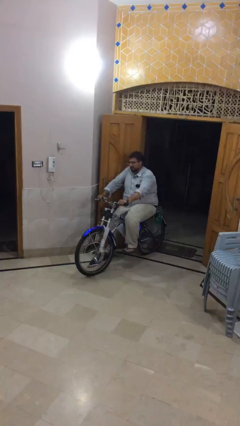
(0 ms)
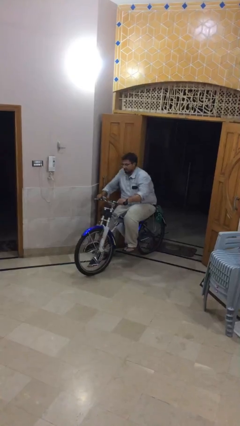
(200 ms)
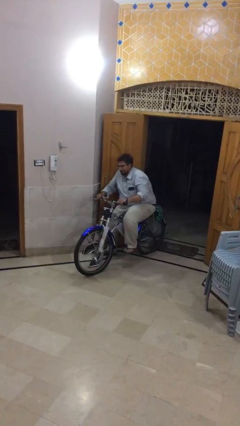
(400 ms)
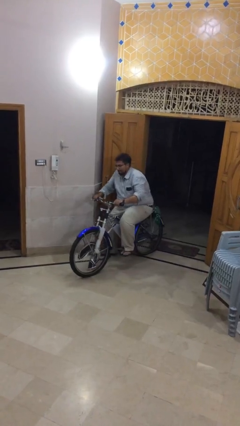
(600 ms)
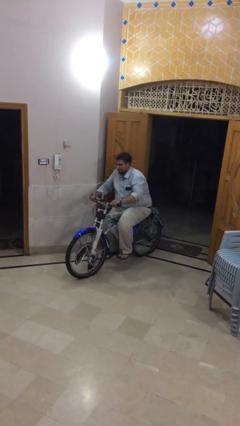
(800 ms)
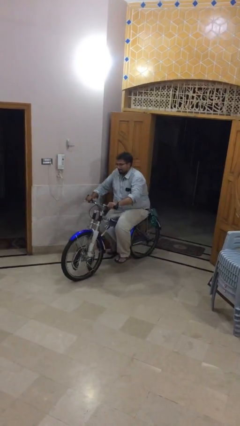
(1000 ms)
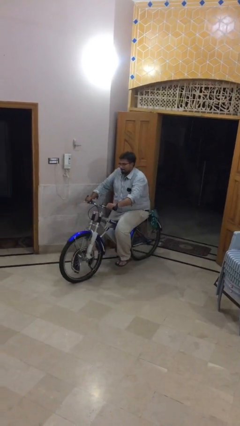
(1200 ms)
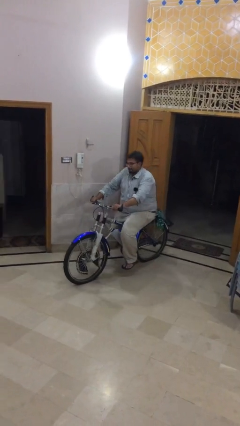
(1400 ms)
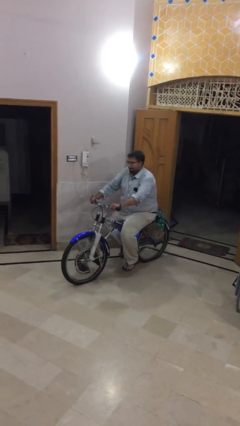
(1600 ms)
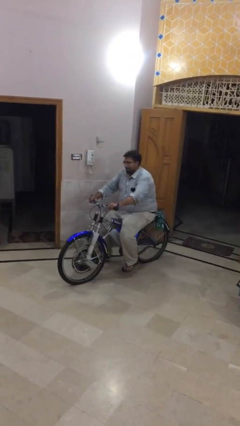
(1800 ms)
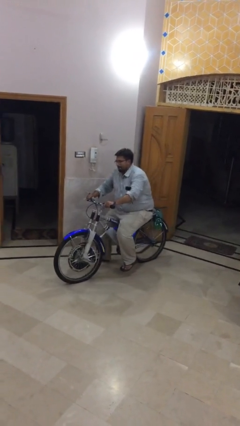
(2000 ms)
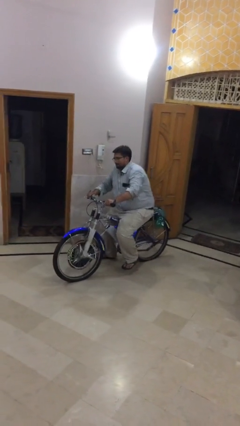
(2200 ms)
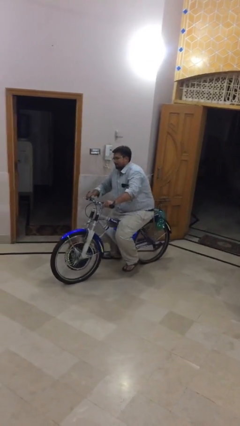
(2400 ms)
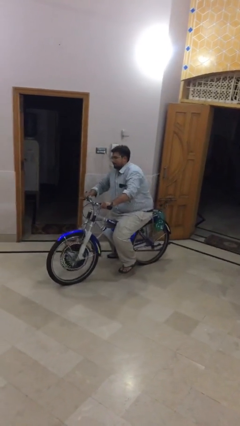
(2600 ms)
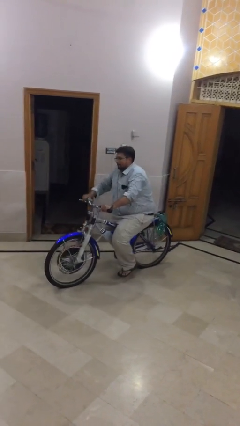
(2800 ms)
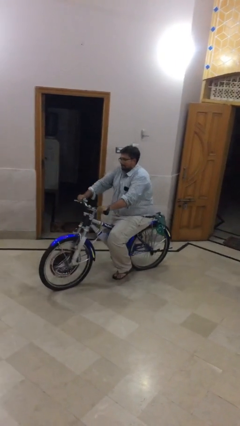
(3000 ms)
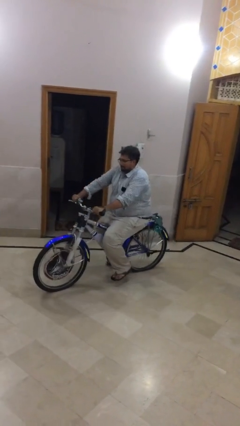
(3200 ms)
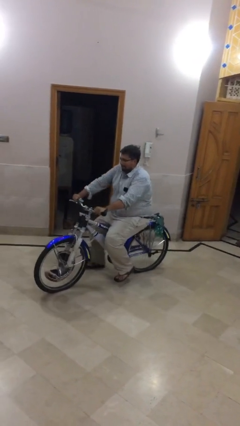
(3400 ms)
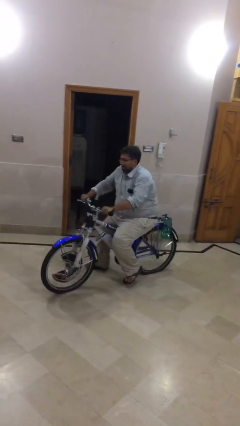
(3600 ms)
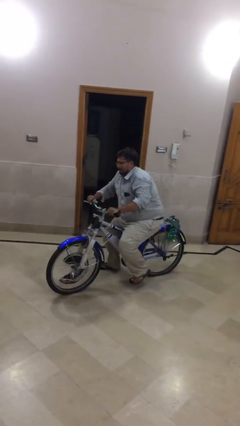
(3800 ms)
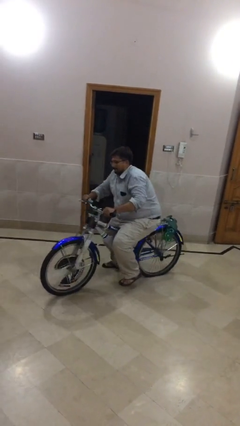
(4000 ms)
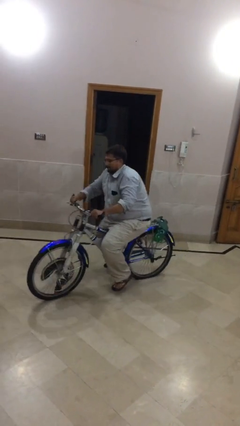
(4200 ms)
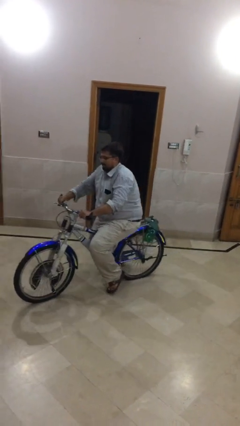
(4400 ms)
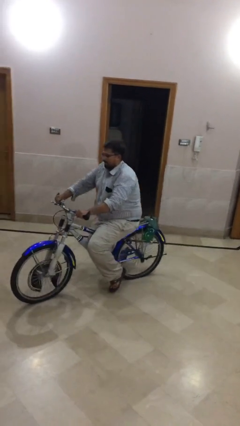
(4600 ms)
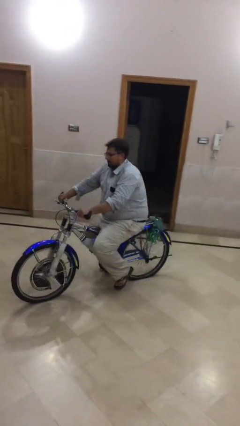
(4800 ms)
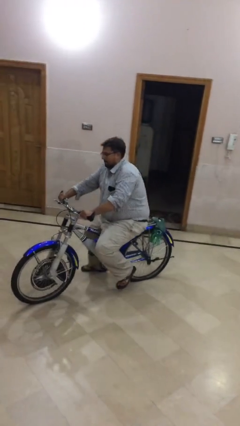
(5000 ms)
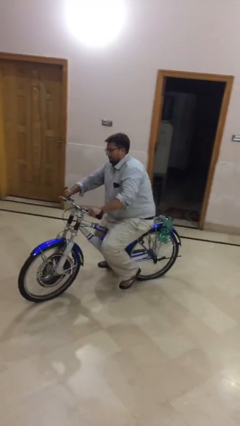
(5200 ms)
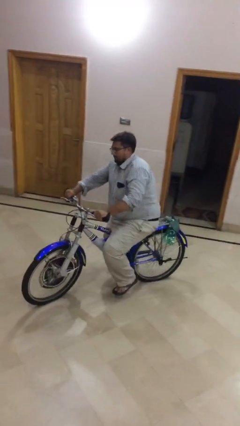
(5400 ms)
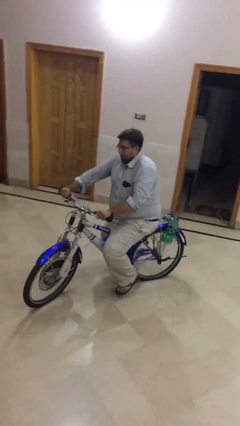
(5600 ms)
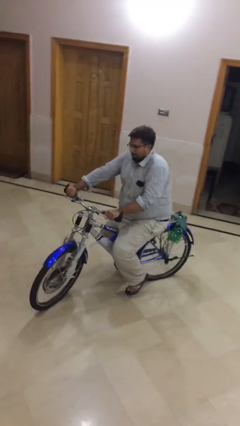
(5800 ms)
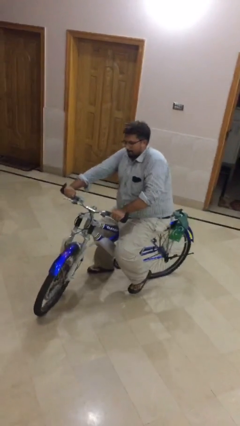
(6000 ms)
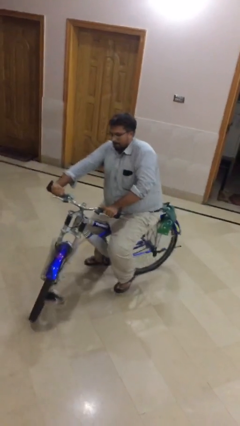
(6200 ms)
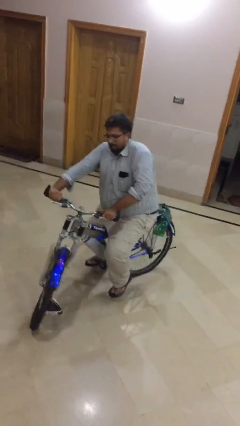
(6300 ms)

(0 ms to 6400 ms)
person rides bicycle

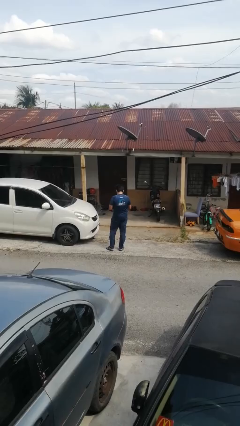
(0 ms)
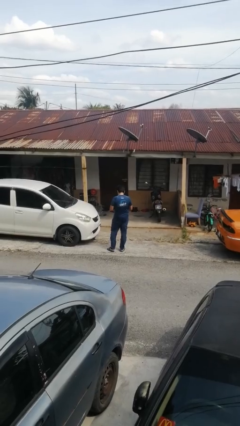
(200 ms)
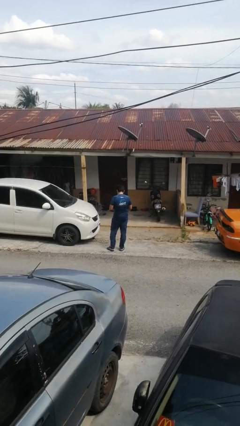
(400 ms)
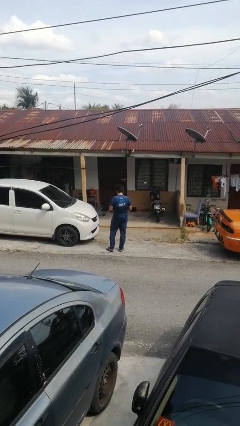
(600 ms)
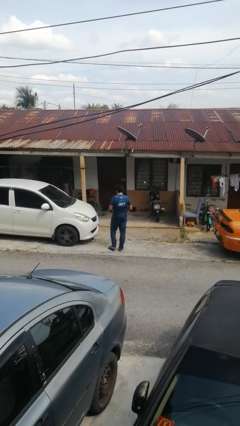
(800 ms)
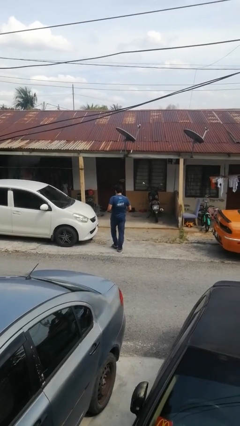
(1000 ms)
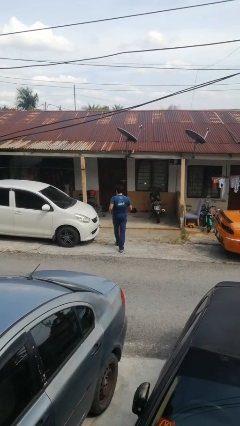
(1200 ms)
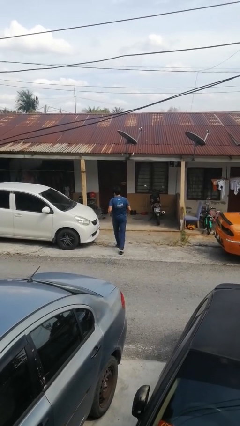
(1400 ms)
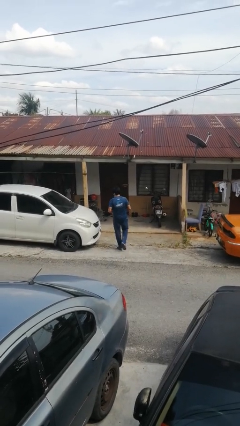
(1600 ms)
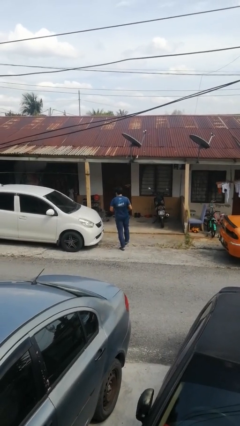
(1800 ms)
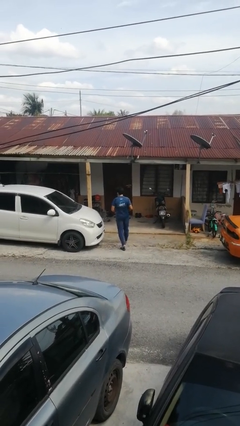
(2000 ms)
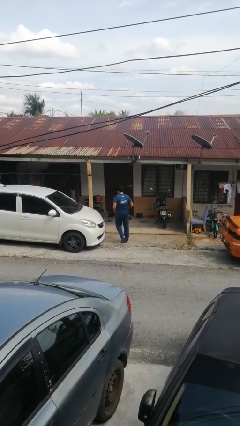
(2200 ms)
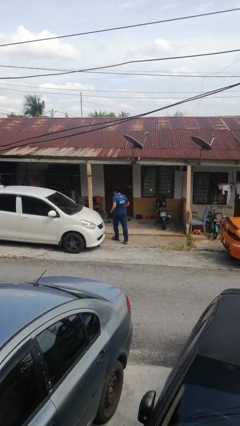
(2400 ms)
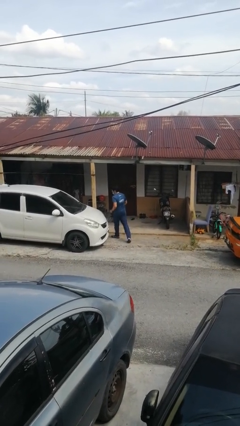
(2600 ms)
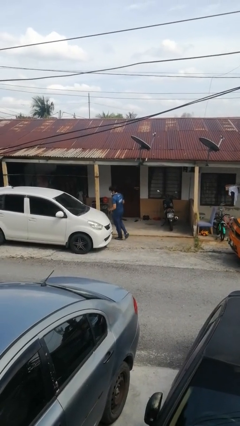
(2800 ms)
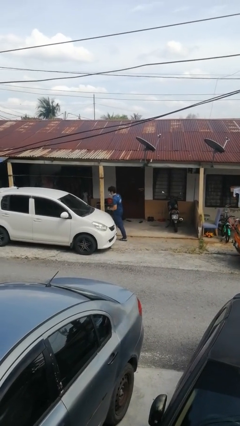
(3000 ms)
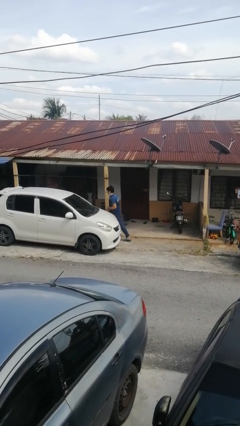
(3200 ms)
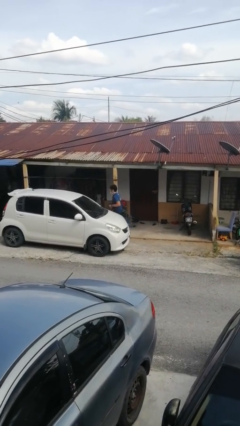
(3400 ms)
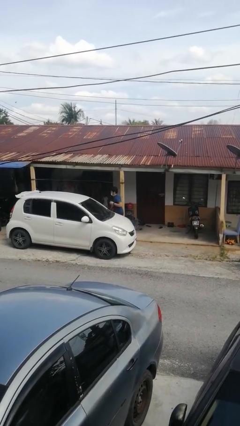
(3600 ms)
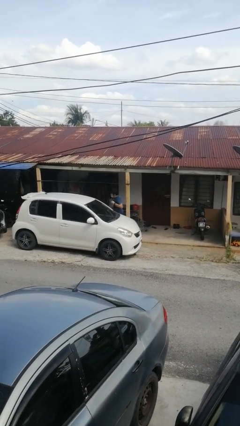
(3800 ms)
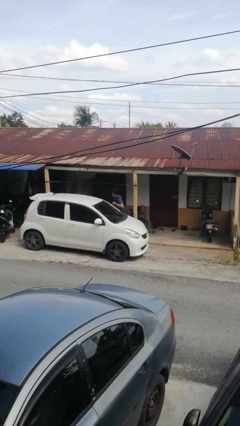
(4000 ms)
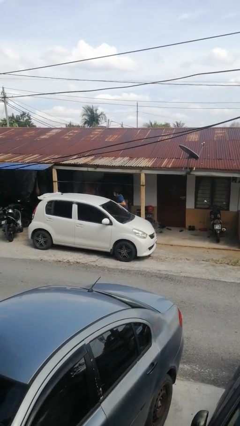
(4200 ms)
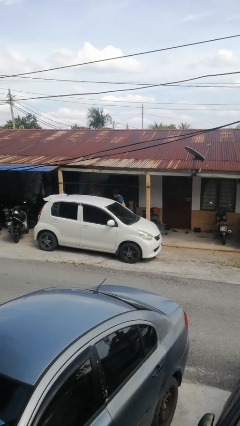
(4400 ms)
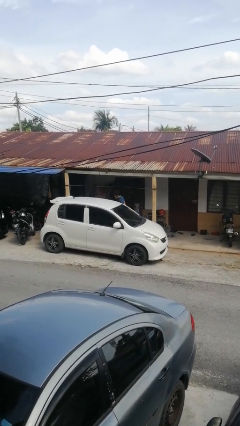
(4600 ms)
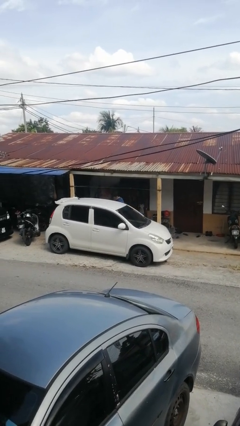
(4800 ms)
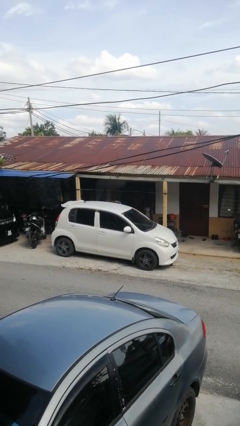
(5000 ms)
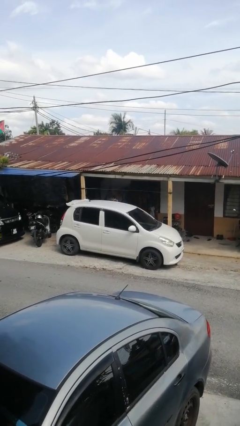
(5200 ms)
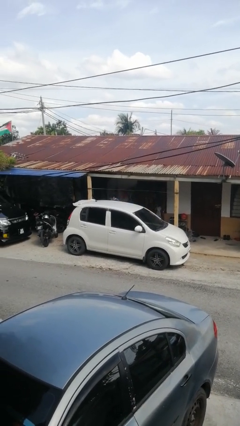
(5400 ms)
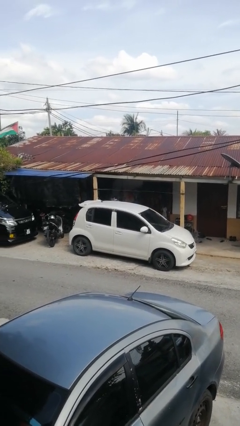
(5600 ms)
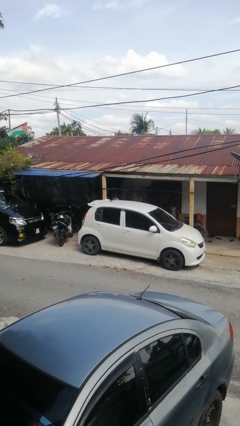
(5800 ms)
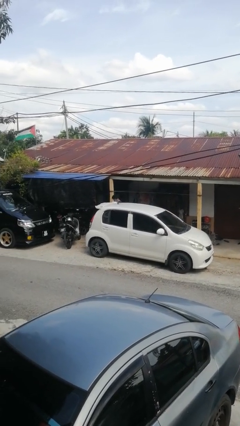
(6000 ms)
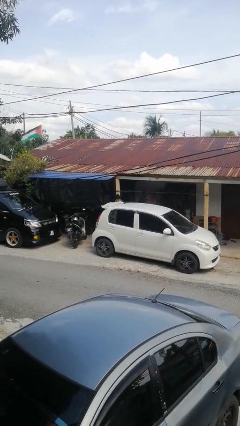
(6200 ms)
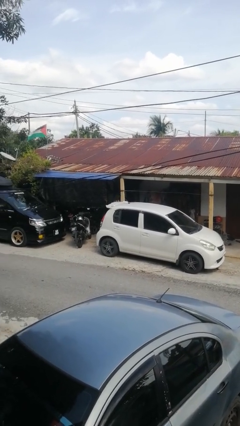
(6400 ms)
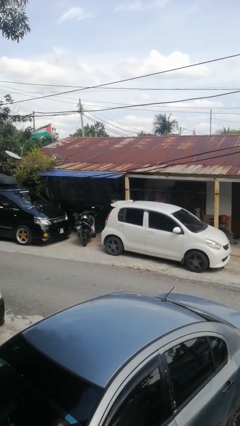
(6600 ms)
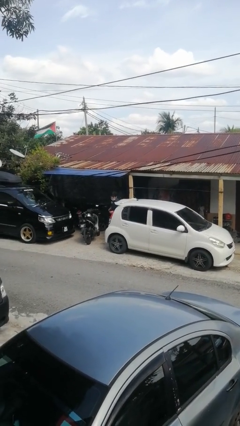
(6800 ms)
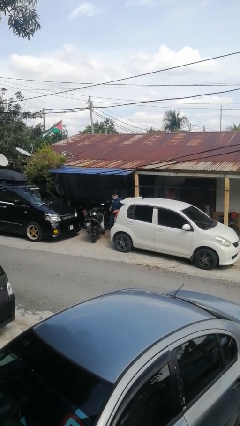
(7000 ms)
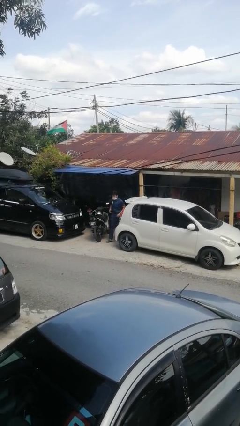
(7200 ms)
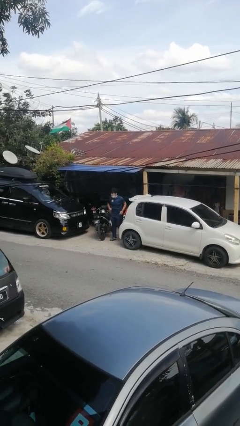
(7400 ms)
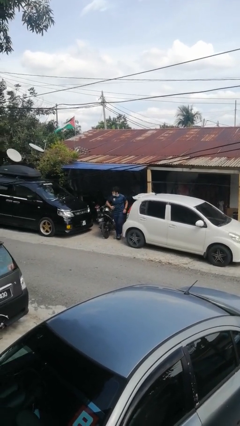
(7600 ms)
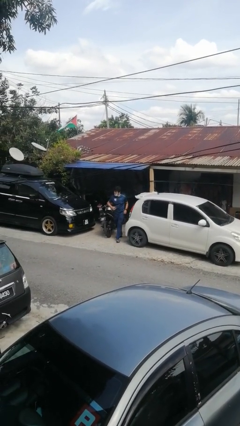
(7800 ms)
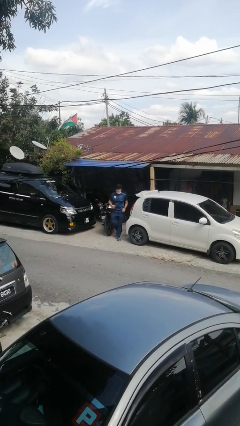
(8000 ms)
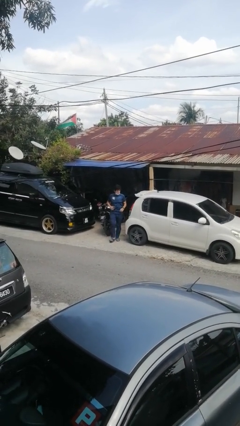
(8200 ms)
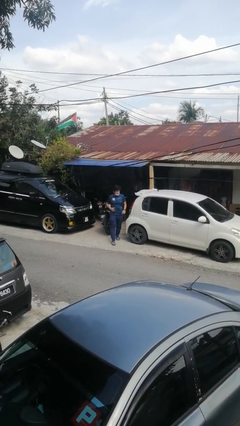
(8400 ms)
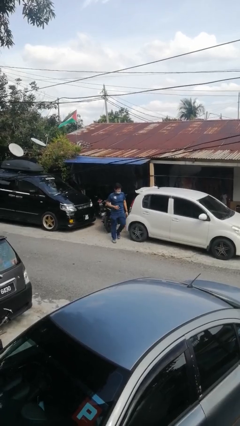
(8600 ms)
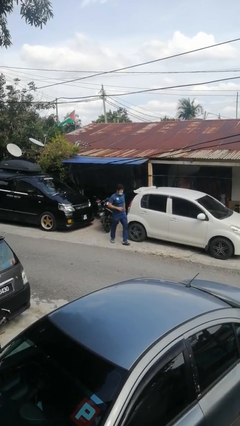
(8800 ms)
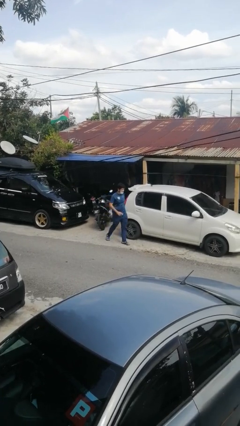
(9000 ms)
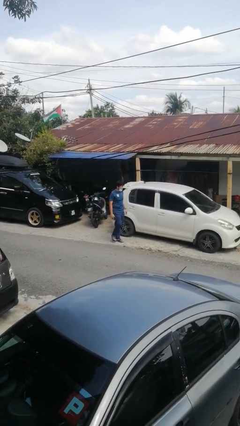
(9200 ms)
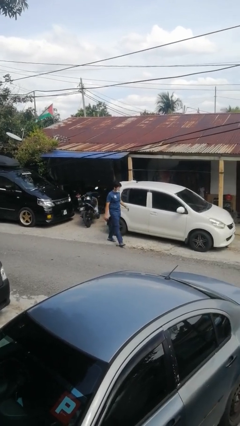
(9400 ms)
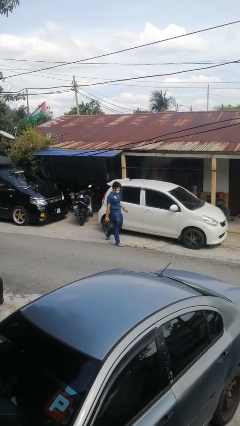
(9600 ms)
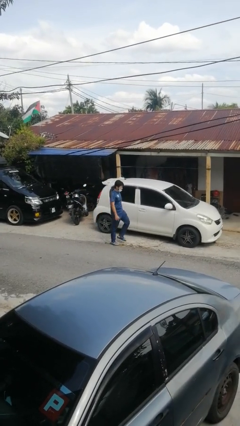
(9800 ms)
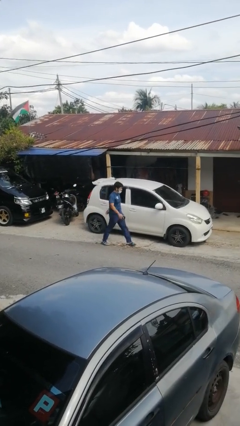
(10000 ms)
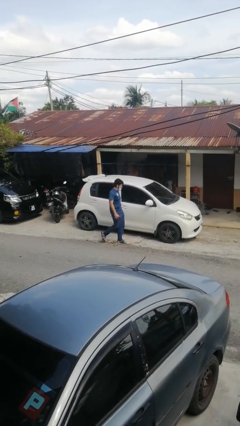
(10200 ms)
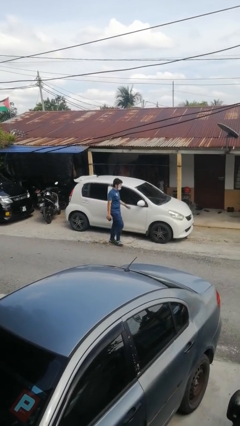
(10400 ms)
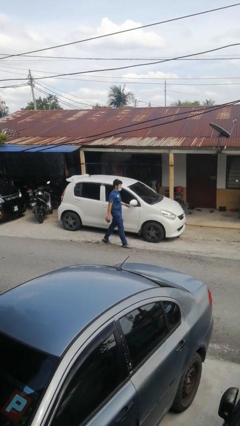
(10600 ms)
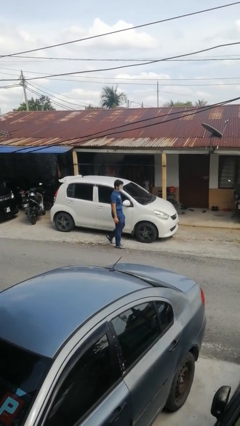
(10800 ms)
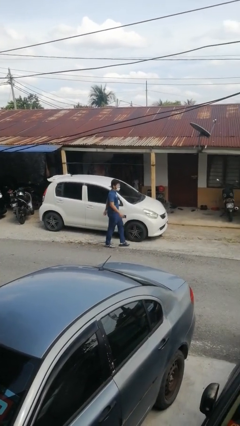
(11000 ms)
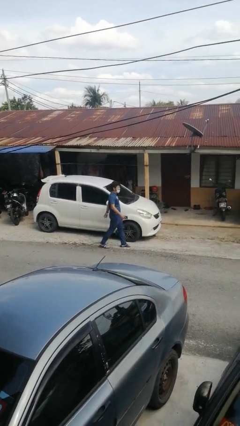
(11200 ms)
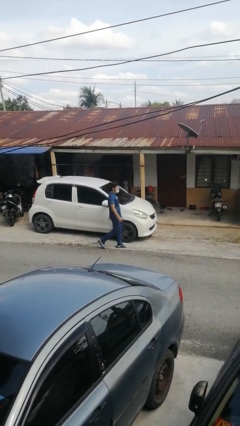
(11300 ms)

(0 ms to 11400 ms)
person walks around car
